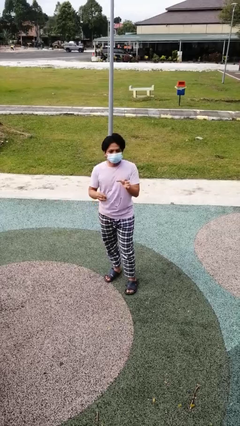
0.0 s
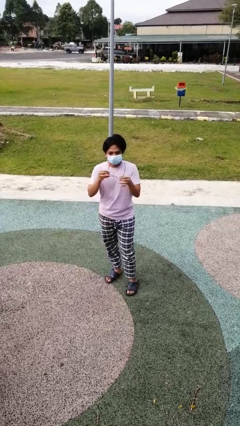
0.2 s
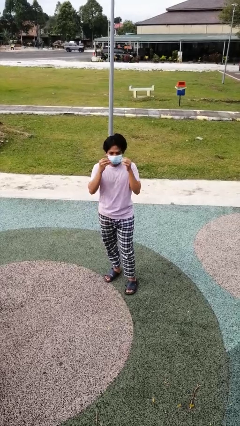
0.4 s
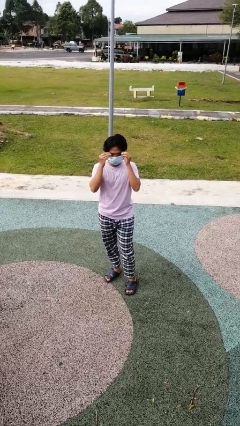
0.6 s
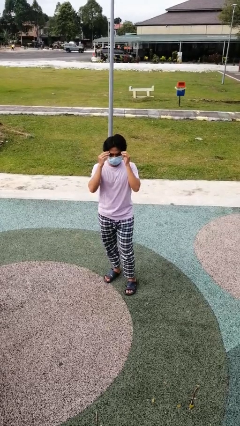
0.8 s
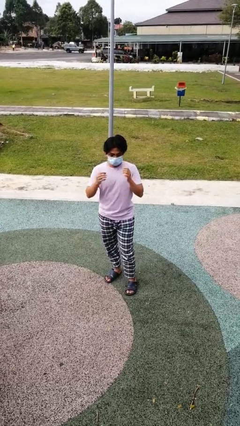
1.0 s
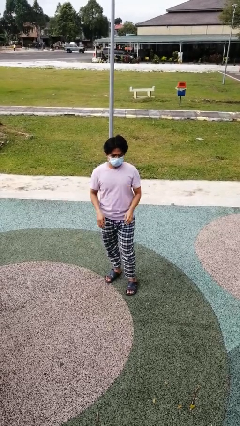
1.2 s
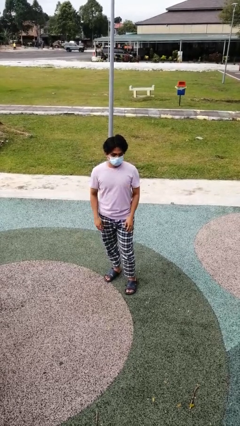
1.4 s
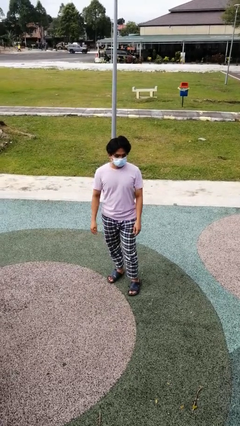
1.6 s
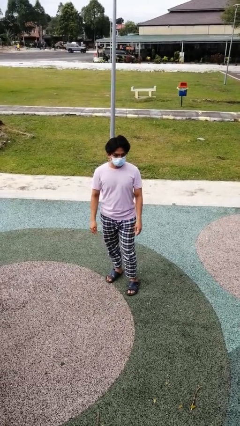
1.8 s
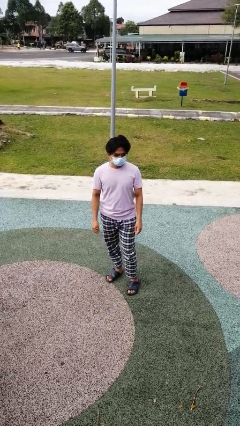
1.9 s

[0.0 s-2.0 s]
person puts on glasses

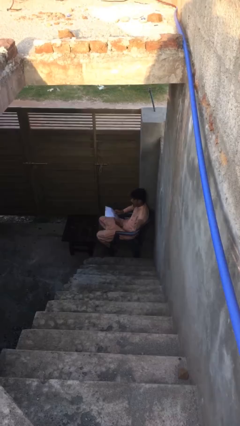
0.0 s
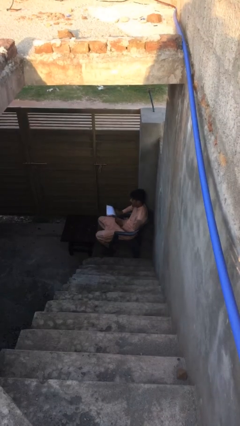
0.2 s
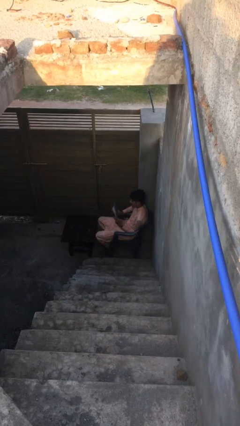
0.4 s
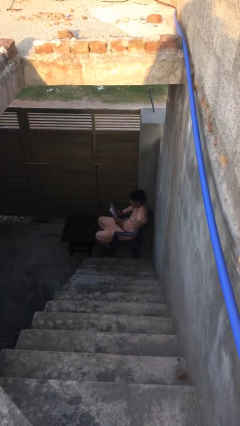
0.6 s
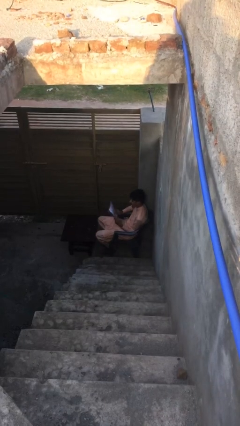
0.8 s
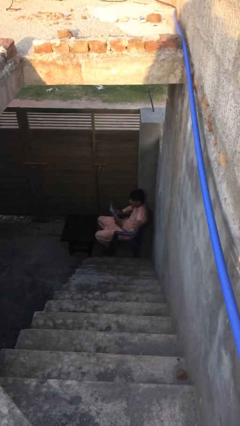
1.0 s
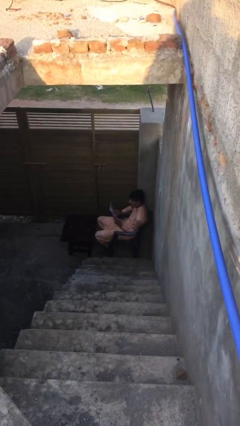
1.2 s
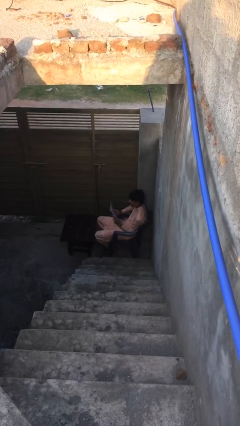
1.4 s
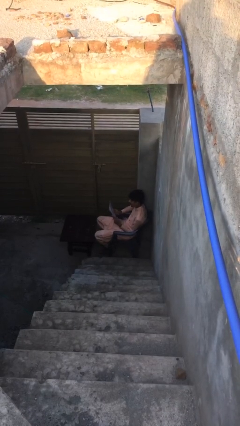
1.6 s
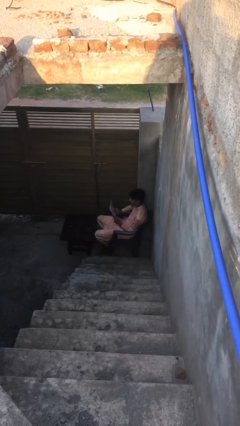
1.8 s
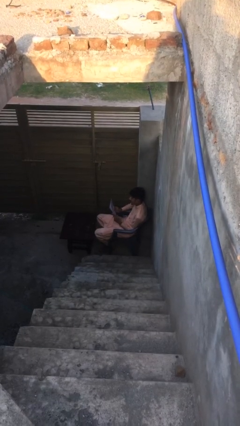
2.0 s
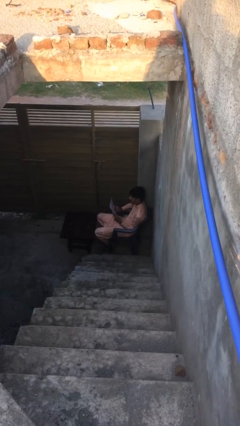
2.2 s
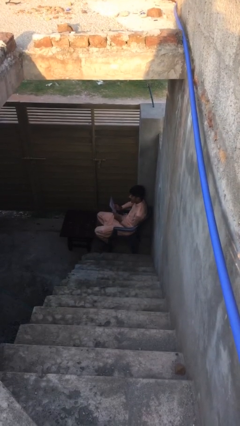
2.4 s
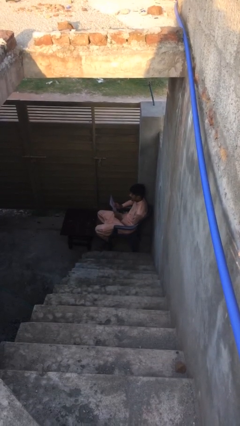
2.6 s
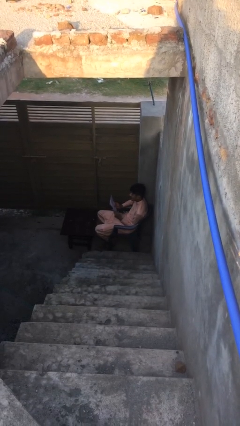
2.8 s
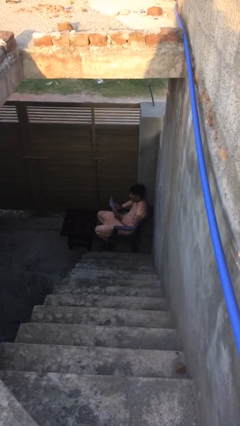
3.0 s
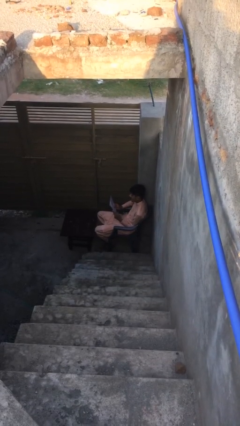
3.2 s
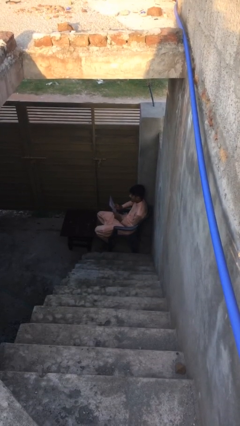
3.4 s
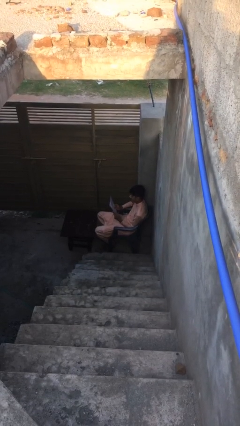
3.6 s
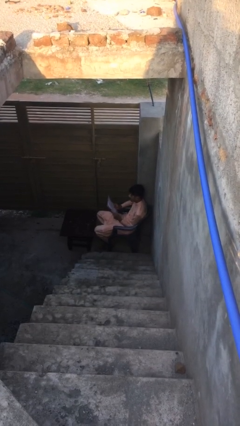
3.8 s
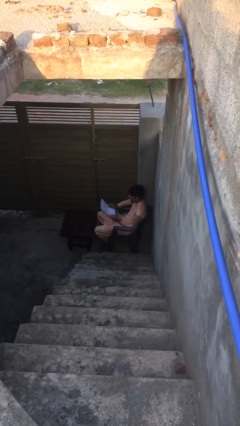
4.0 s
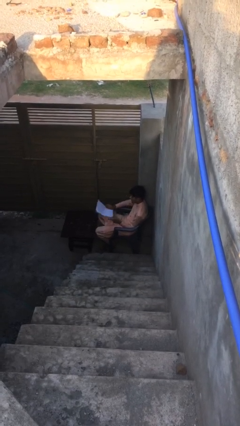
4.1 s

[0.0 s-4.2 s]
person reads document

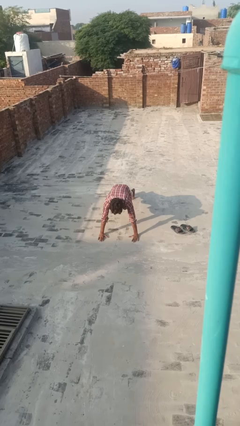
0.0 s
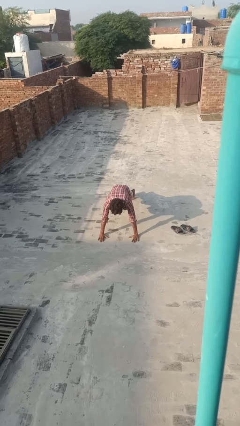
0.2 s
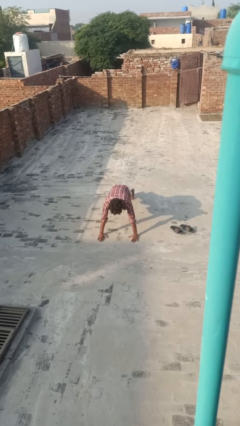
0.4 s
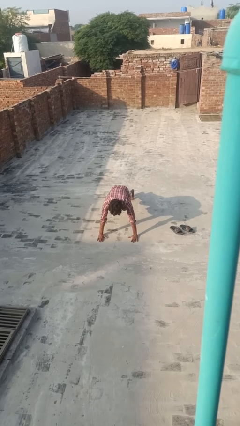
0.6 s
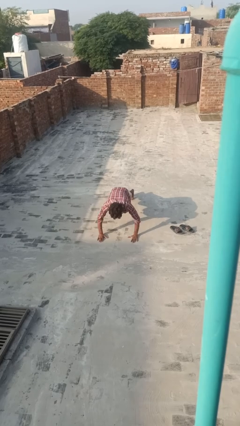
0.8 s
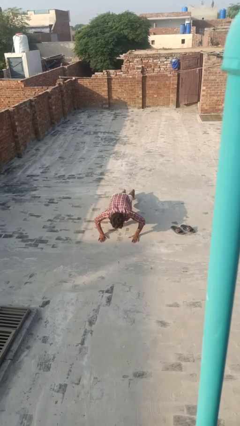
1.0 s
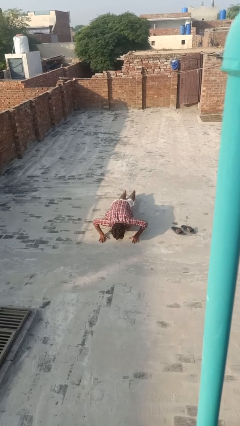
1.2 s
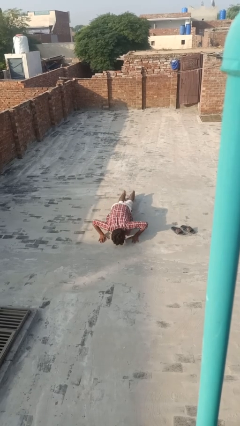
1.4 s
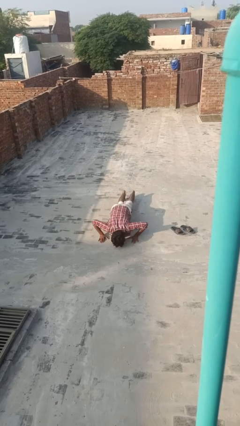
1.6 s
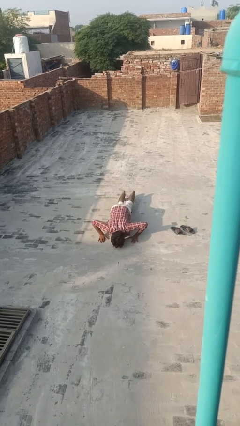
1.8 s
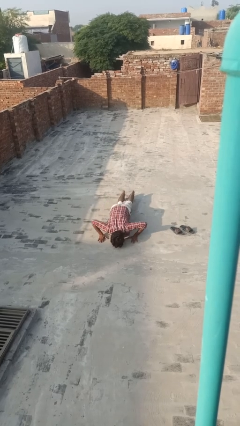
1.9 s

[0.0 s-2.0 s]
person exercises with pushup

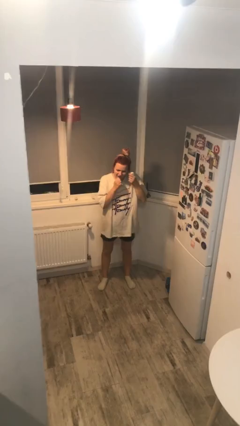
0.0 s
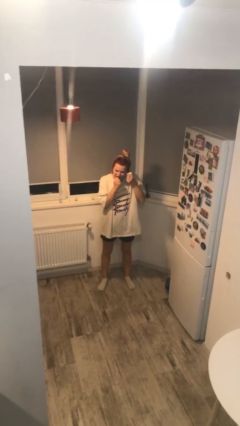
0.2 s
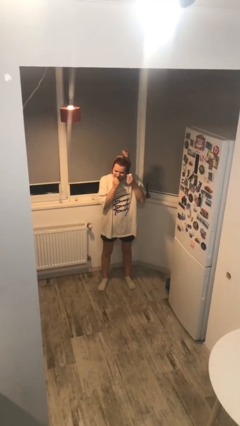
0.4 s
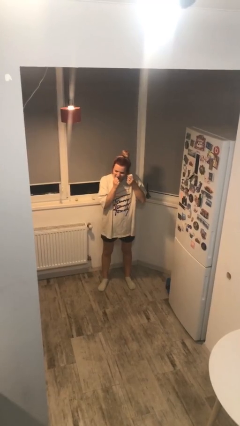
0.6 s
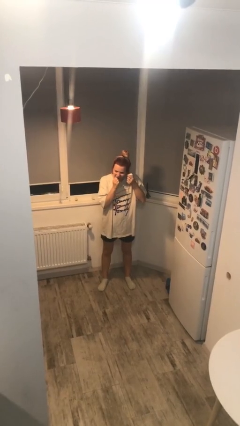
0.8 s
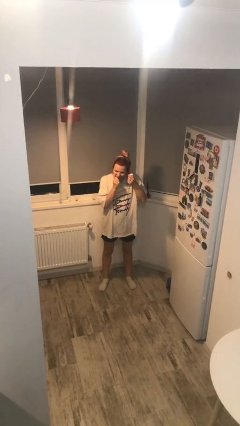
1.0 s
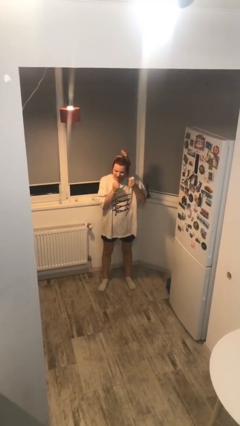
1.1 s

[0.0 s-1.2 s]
person flosses

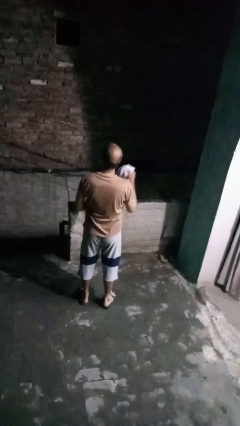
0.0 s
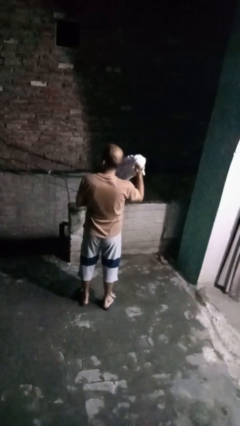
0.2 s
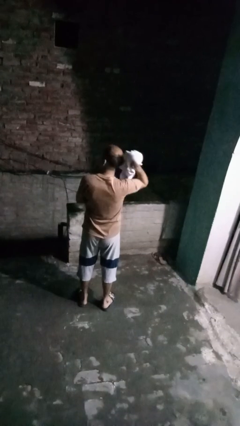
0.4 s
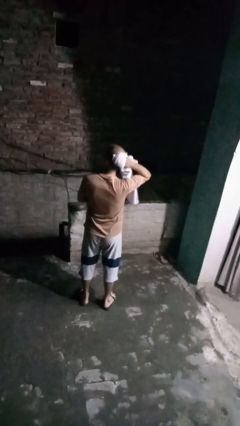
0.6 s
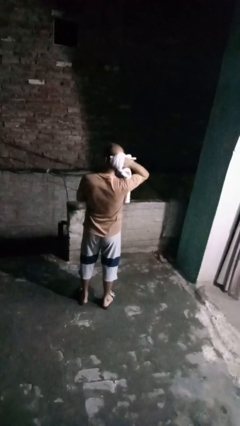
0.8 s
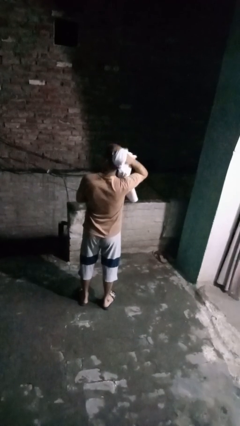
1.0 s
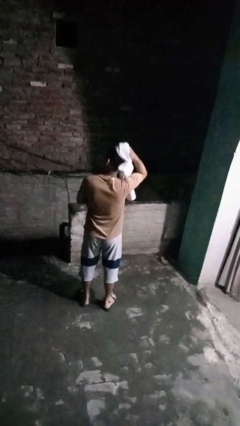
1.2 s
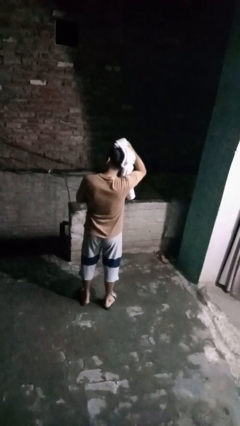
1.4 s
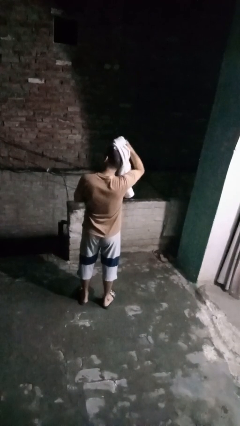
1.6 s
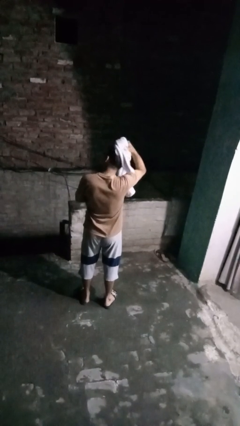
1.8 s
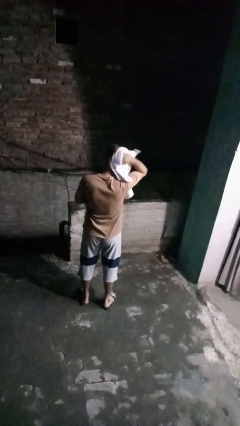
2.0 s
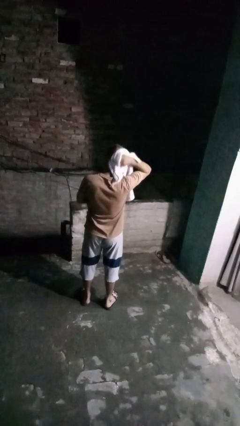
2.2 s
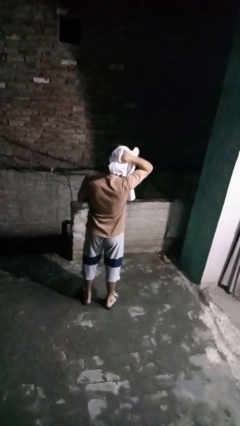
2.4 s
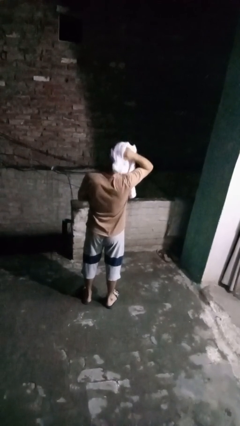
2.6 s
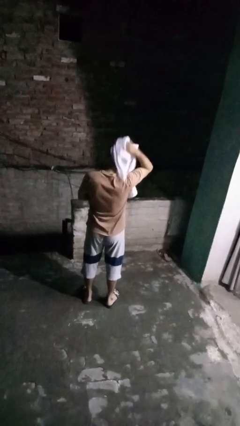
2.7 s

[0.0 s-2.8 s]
person dries hair with towel

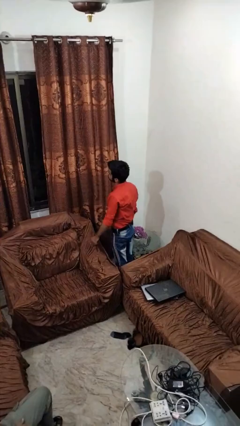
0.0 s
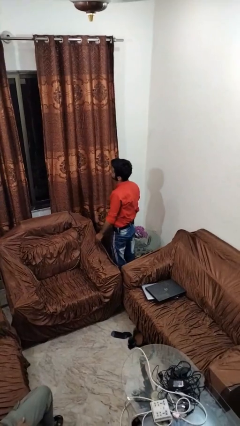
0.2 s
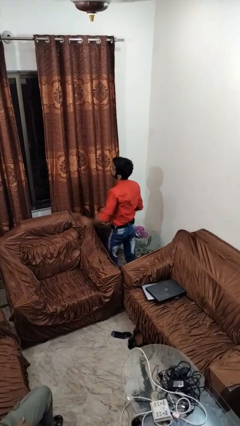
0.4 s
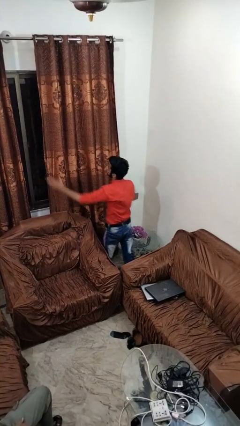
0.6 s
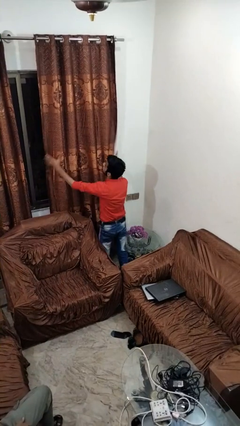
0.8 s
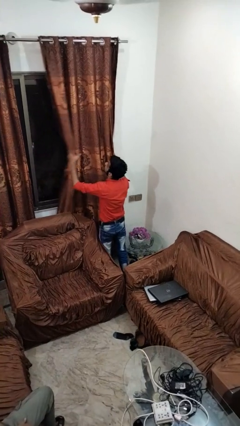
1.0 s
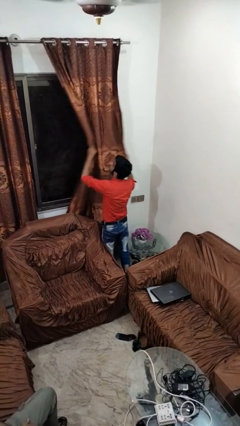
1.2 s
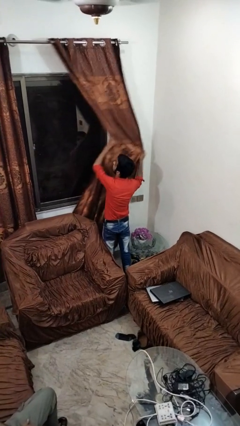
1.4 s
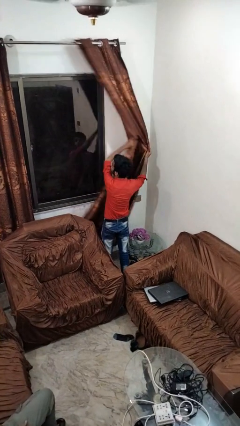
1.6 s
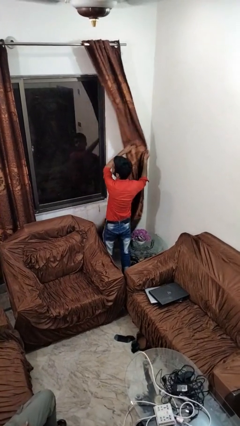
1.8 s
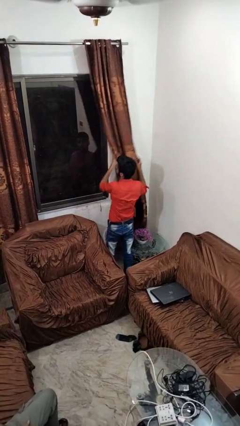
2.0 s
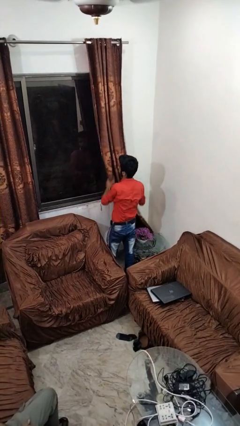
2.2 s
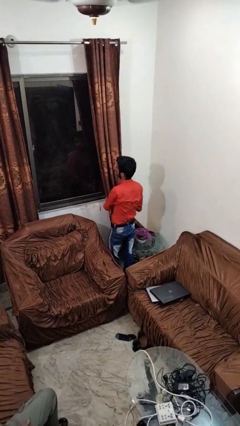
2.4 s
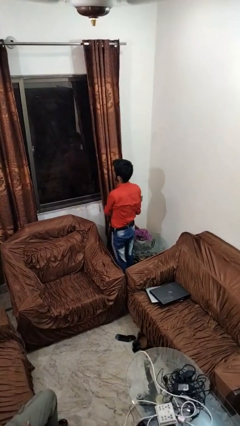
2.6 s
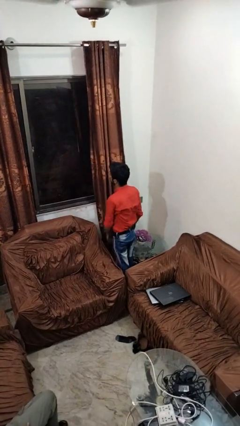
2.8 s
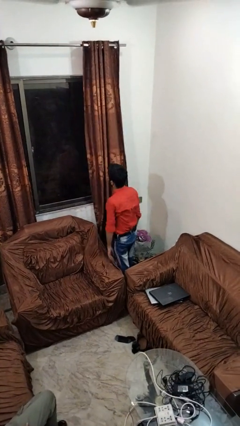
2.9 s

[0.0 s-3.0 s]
person opens curtains

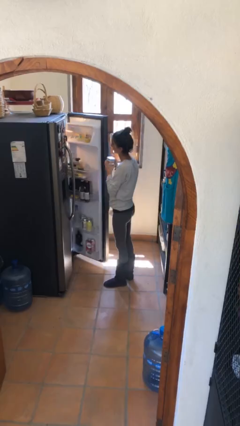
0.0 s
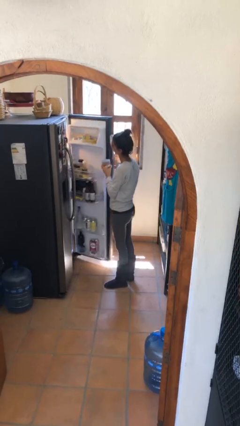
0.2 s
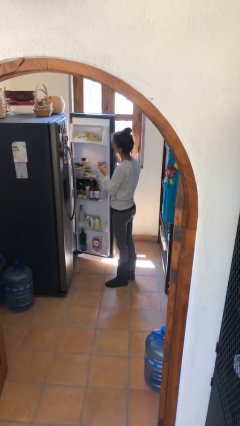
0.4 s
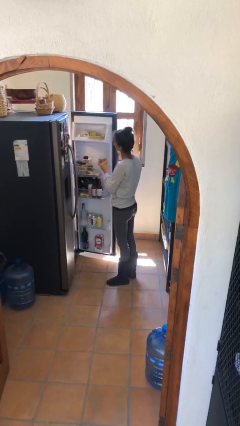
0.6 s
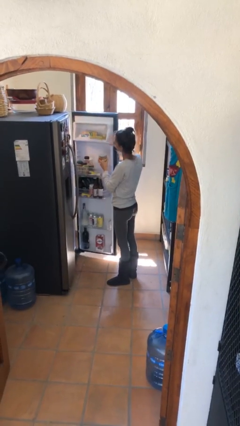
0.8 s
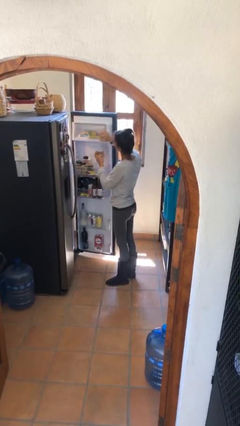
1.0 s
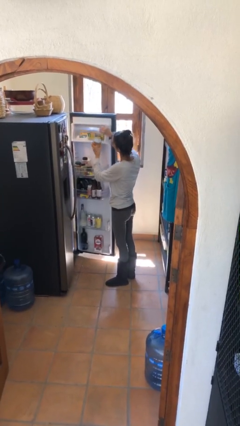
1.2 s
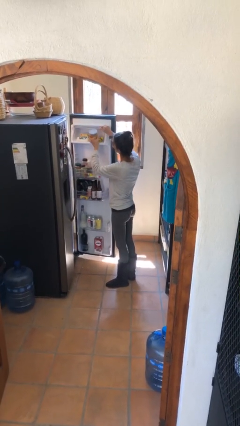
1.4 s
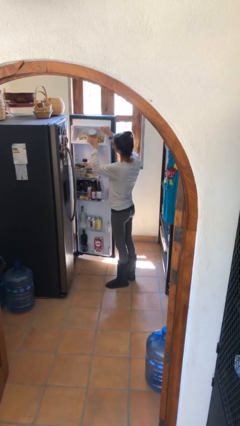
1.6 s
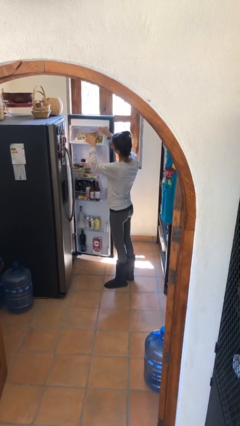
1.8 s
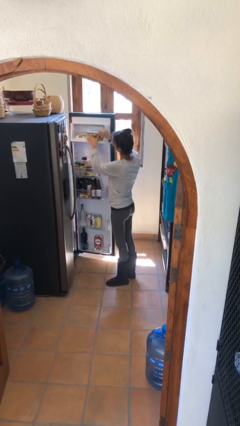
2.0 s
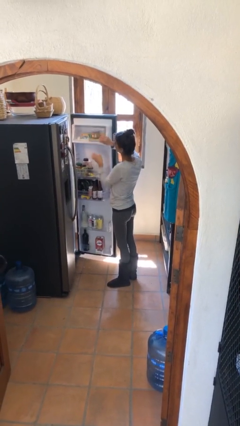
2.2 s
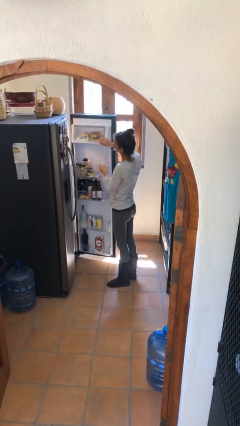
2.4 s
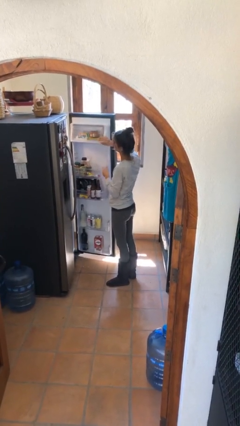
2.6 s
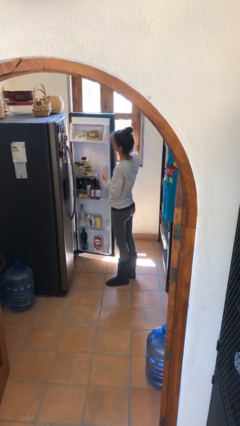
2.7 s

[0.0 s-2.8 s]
person puts object into refrigerator
